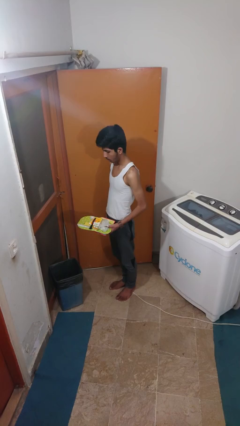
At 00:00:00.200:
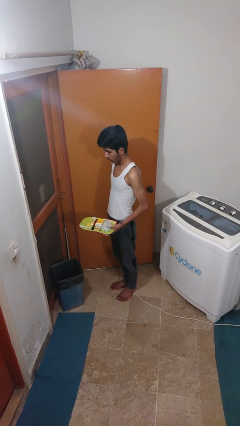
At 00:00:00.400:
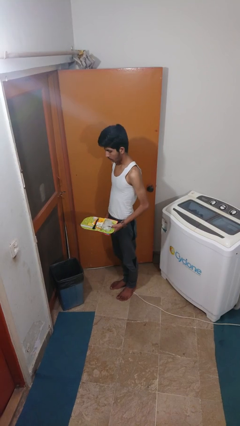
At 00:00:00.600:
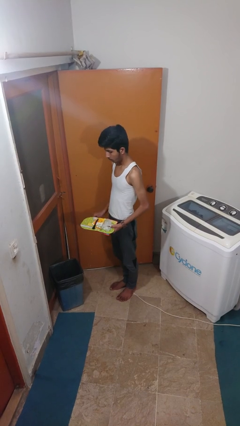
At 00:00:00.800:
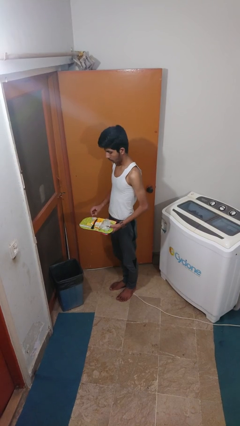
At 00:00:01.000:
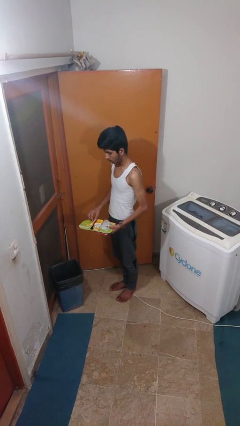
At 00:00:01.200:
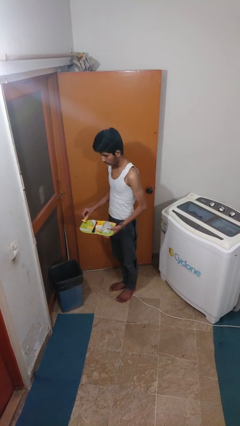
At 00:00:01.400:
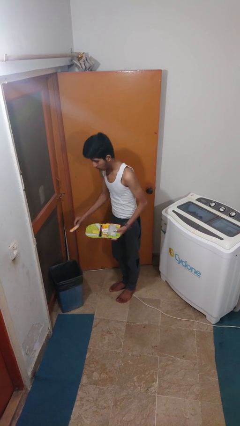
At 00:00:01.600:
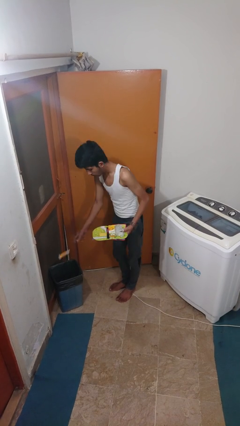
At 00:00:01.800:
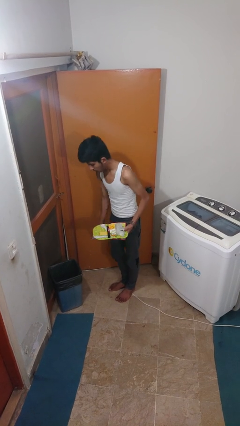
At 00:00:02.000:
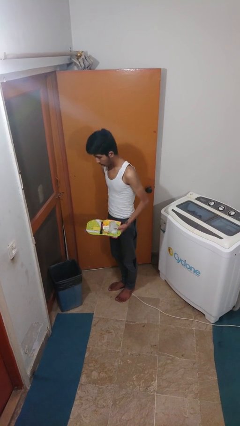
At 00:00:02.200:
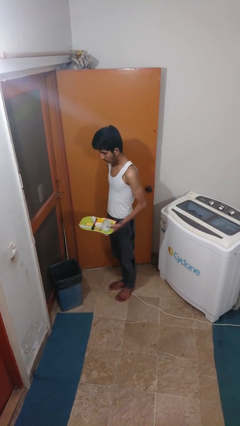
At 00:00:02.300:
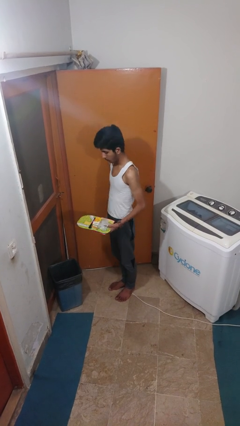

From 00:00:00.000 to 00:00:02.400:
person discards trash

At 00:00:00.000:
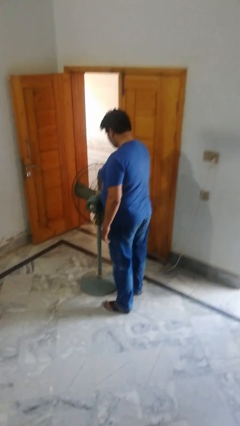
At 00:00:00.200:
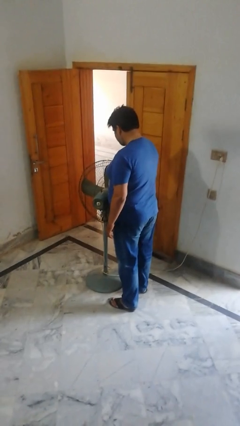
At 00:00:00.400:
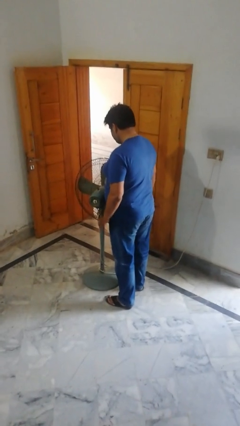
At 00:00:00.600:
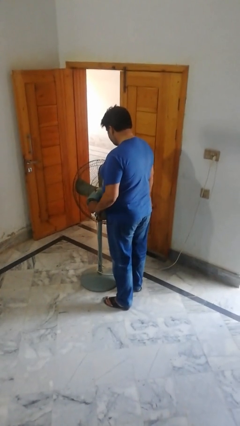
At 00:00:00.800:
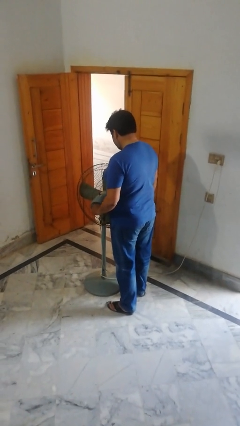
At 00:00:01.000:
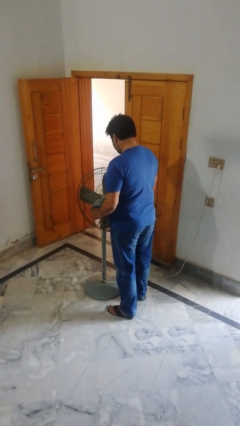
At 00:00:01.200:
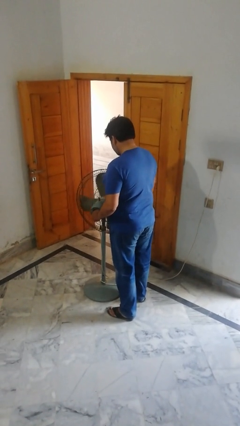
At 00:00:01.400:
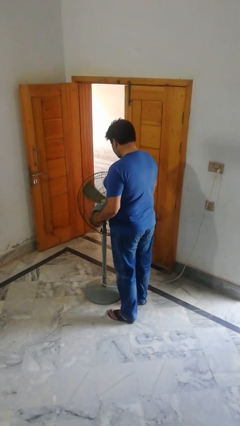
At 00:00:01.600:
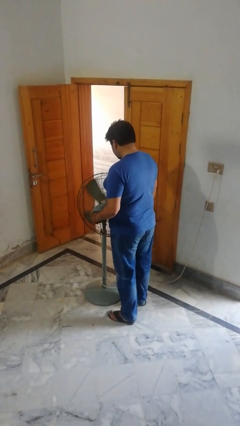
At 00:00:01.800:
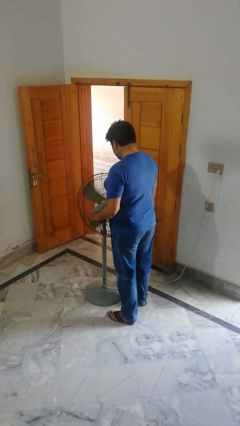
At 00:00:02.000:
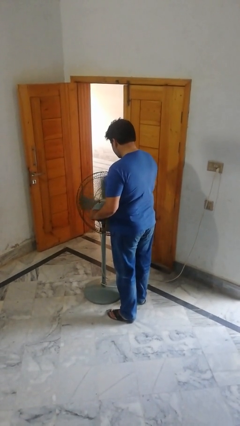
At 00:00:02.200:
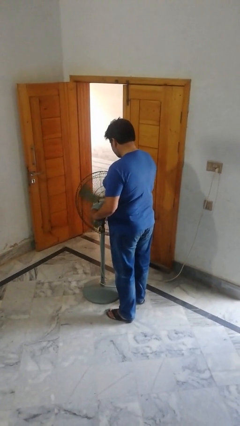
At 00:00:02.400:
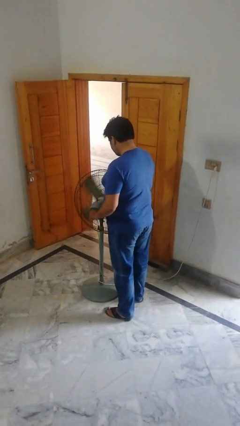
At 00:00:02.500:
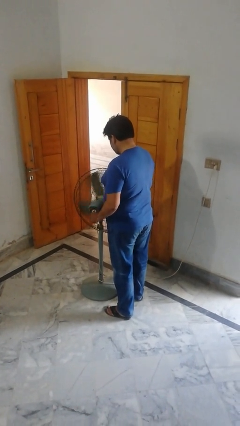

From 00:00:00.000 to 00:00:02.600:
person turns on fan

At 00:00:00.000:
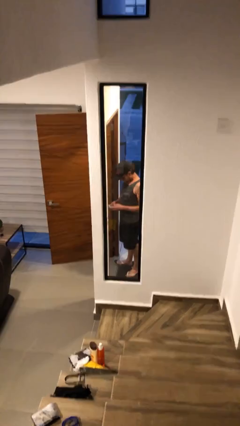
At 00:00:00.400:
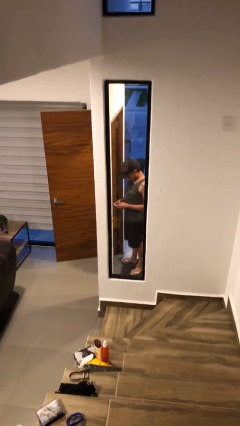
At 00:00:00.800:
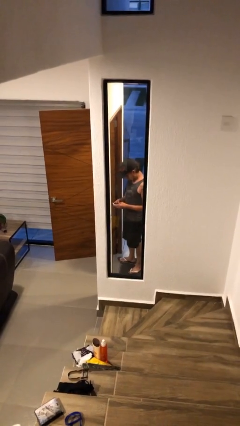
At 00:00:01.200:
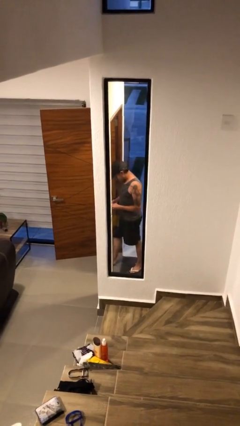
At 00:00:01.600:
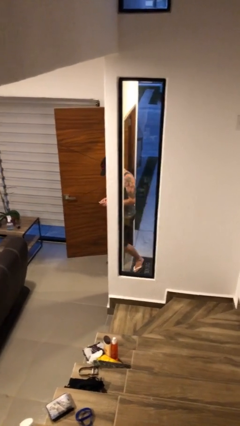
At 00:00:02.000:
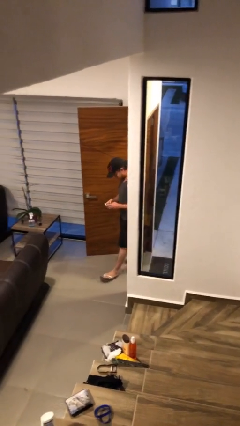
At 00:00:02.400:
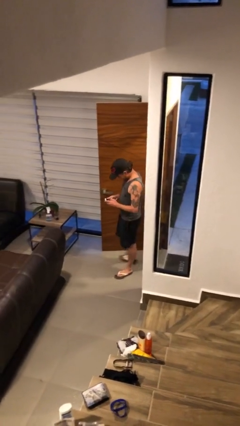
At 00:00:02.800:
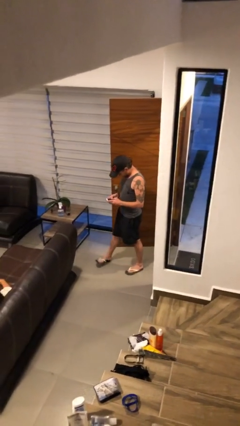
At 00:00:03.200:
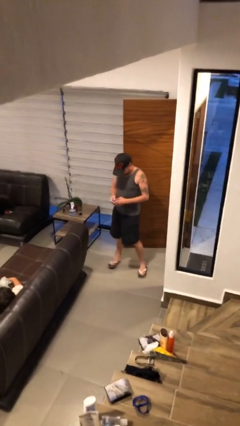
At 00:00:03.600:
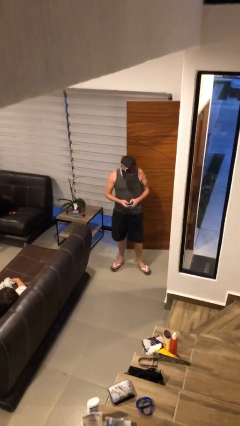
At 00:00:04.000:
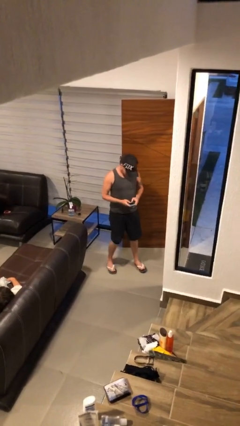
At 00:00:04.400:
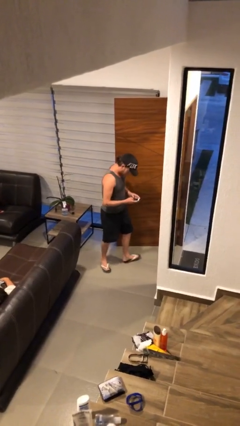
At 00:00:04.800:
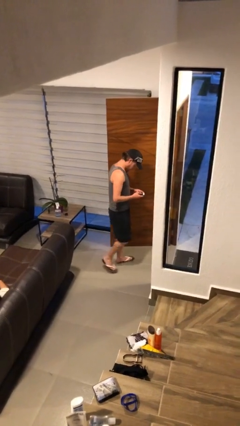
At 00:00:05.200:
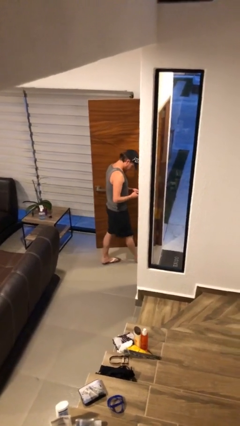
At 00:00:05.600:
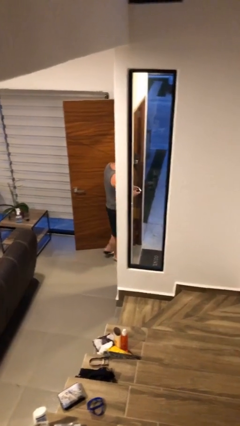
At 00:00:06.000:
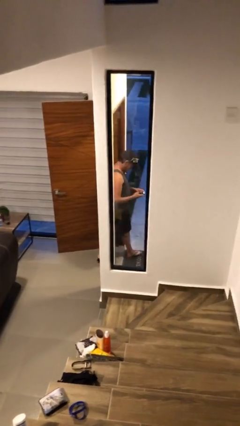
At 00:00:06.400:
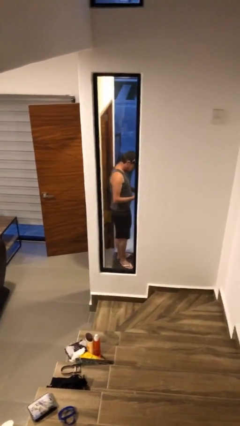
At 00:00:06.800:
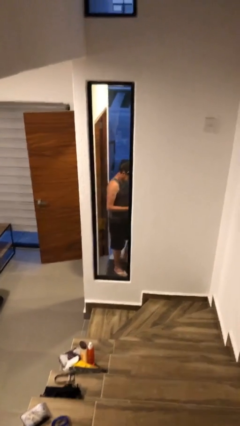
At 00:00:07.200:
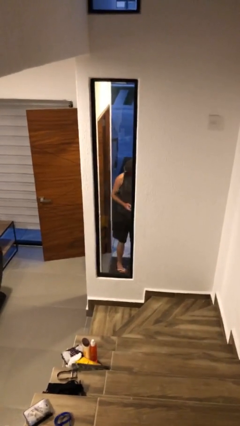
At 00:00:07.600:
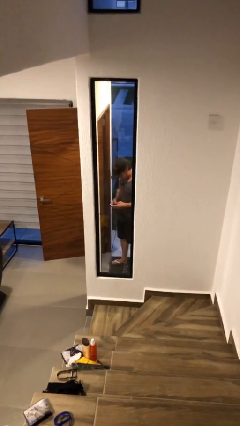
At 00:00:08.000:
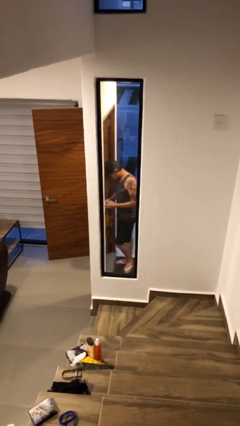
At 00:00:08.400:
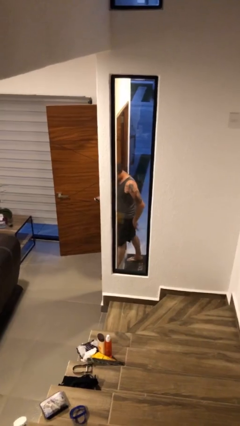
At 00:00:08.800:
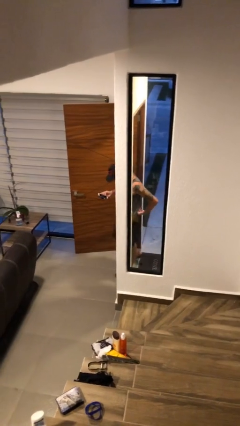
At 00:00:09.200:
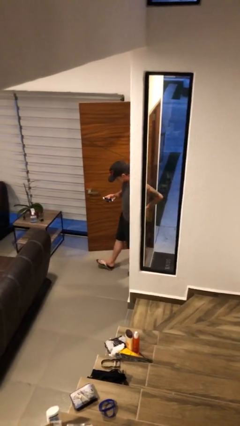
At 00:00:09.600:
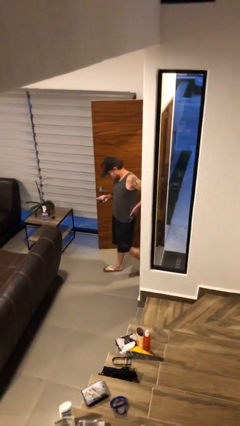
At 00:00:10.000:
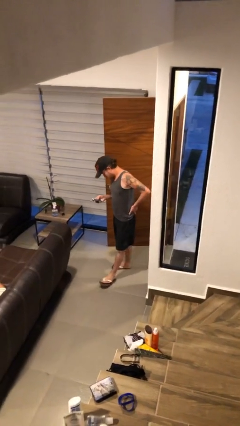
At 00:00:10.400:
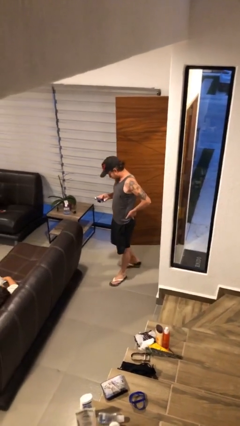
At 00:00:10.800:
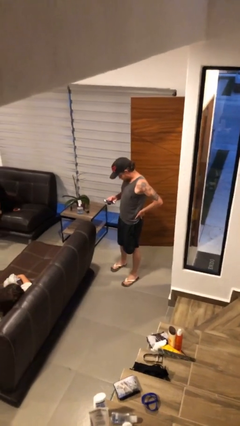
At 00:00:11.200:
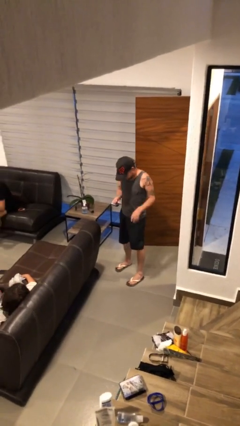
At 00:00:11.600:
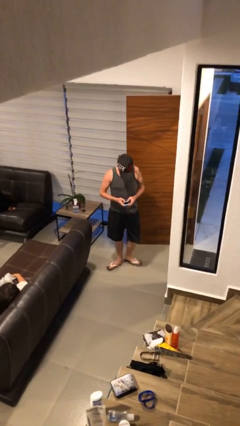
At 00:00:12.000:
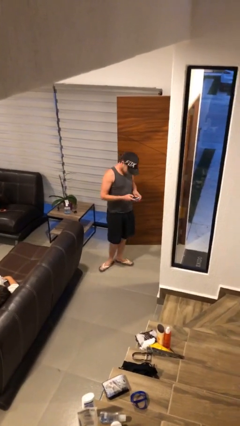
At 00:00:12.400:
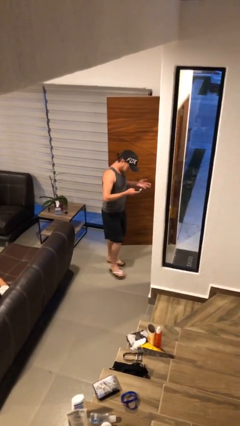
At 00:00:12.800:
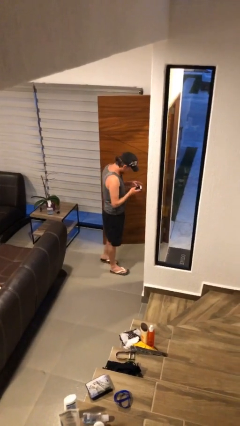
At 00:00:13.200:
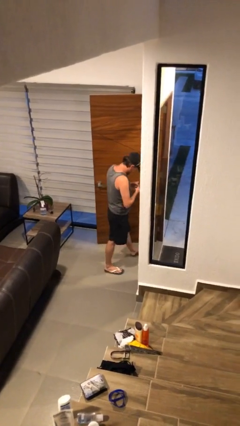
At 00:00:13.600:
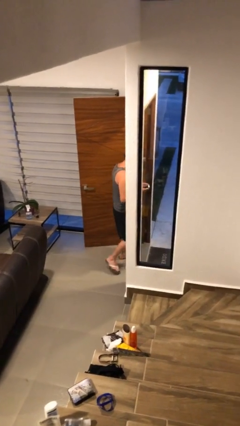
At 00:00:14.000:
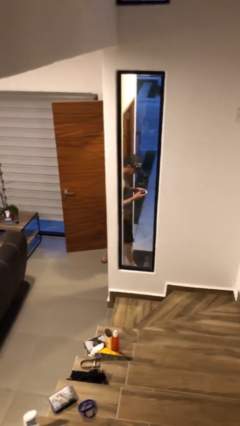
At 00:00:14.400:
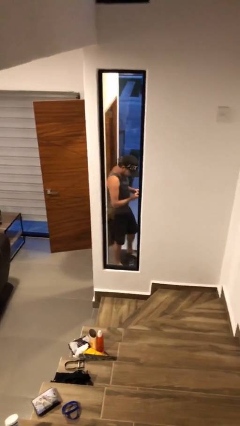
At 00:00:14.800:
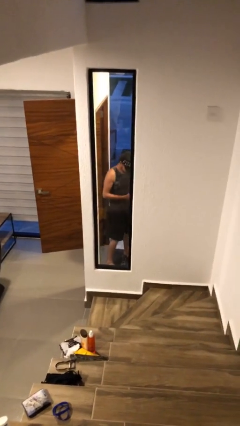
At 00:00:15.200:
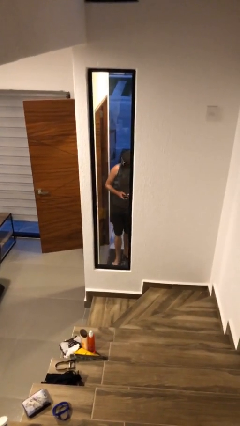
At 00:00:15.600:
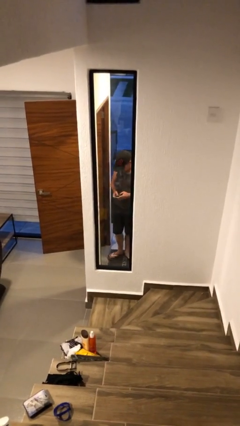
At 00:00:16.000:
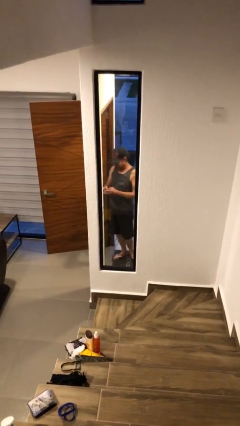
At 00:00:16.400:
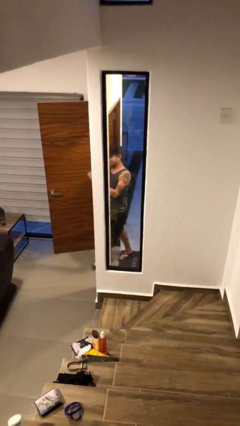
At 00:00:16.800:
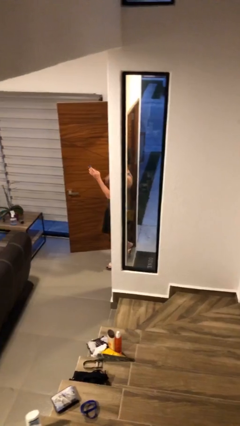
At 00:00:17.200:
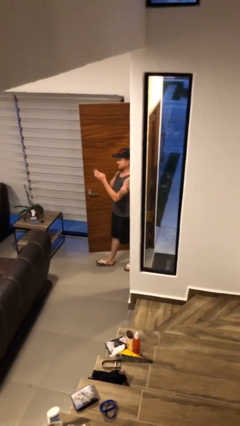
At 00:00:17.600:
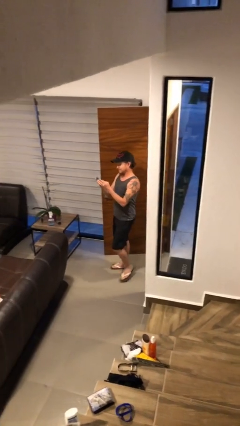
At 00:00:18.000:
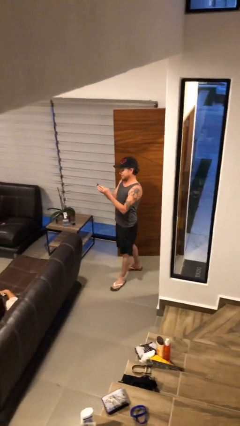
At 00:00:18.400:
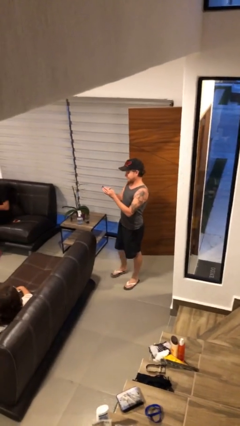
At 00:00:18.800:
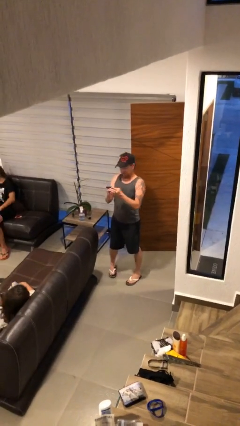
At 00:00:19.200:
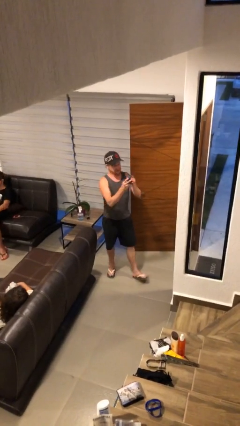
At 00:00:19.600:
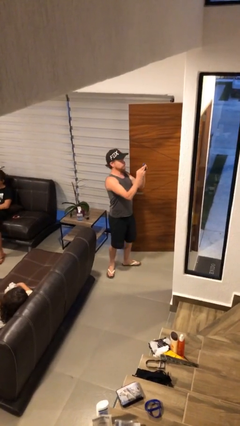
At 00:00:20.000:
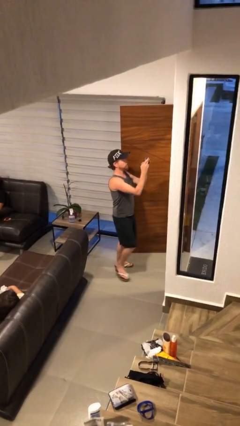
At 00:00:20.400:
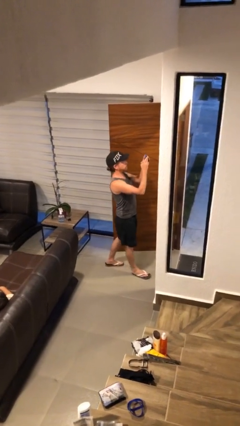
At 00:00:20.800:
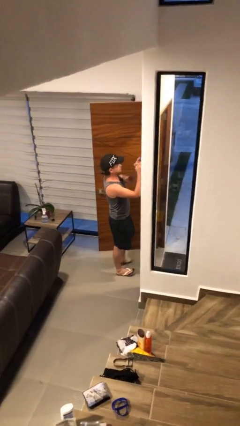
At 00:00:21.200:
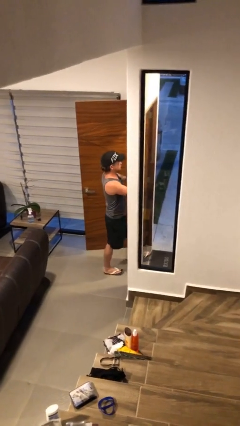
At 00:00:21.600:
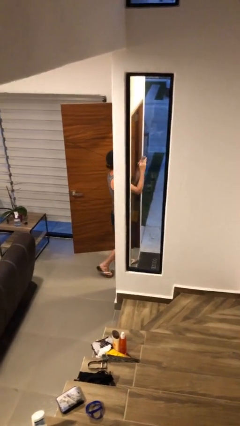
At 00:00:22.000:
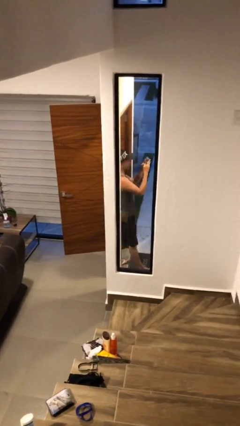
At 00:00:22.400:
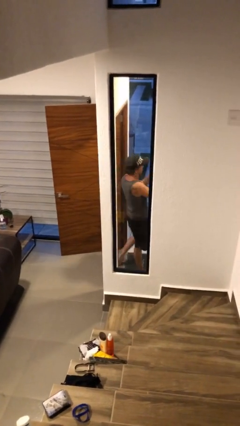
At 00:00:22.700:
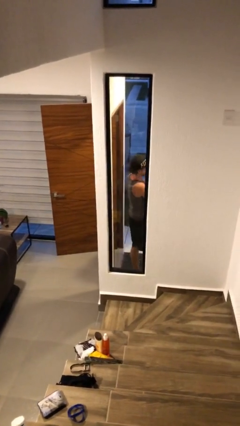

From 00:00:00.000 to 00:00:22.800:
person texts on phone

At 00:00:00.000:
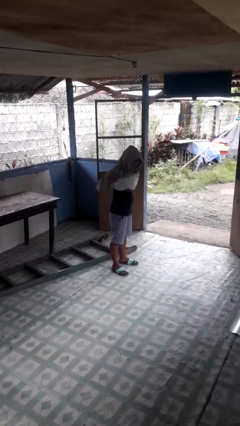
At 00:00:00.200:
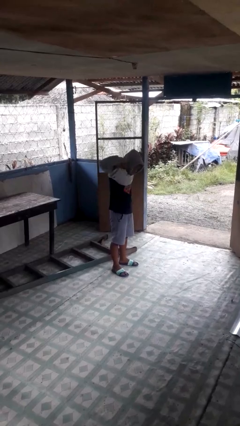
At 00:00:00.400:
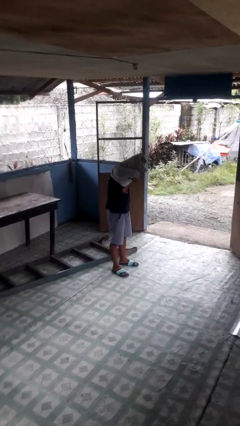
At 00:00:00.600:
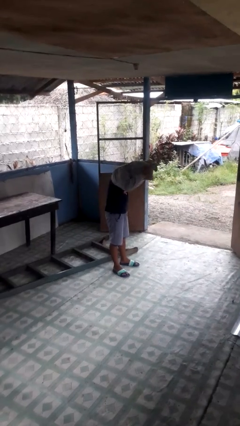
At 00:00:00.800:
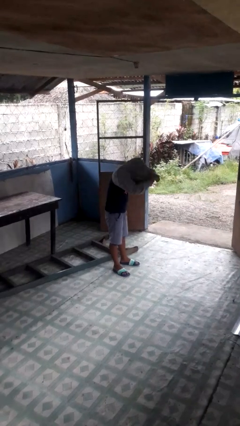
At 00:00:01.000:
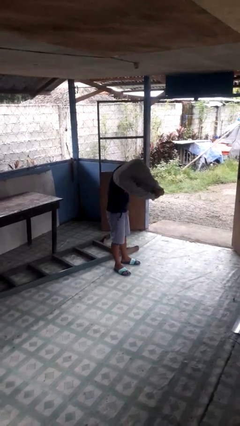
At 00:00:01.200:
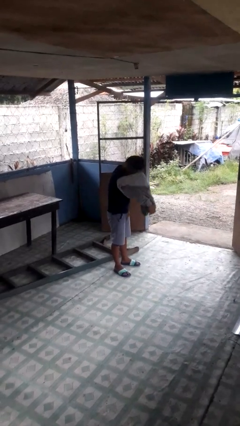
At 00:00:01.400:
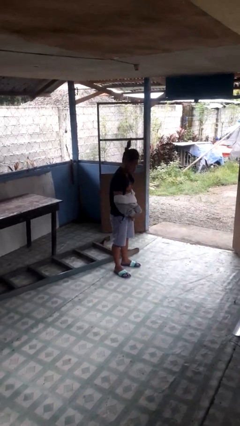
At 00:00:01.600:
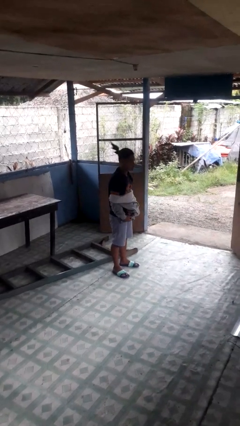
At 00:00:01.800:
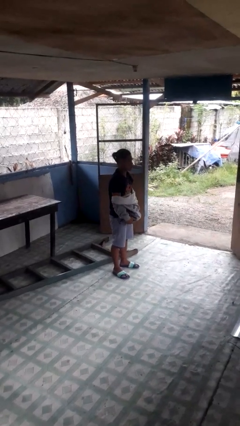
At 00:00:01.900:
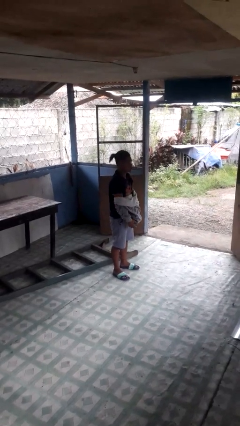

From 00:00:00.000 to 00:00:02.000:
person takes off hoodie
